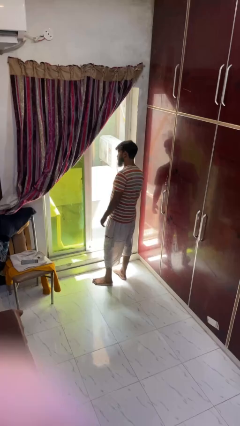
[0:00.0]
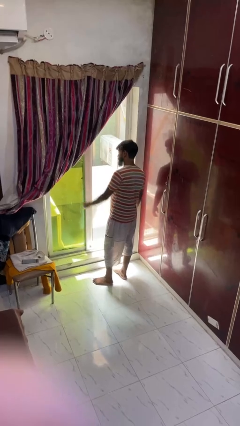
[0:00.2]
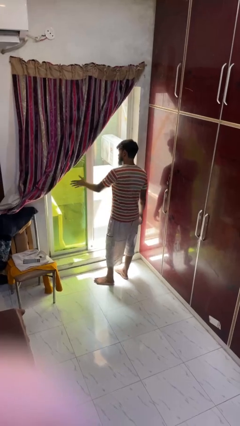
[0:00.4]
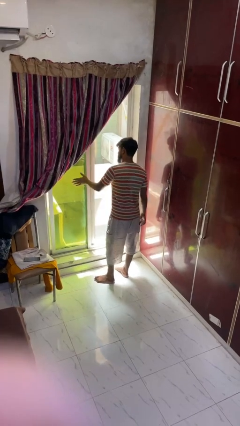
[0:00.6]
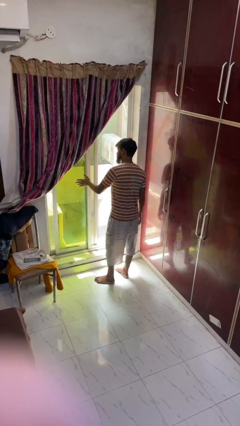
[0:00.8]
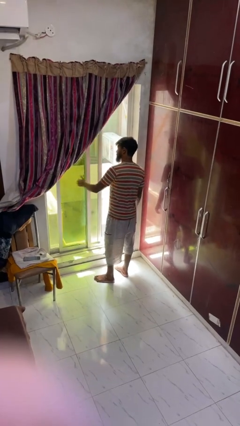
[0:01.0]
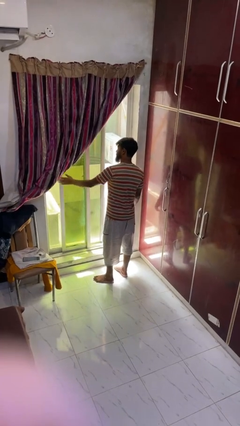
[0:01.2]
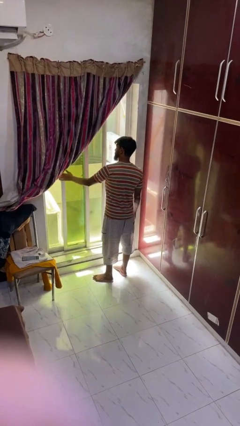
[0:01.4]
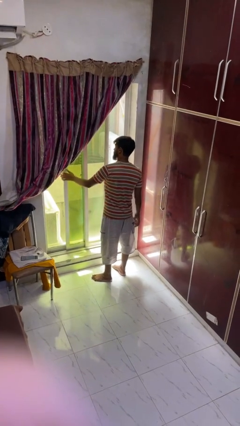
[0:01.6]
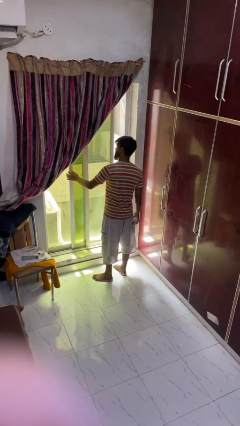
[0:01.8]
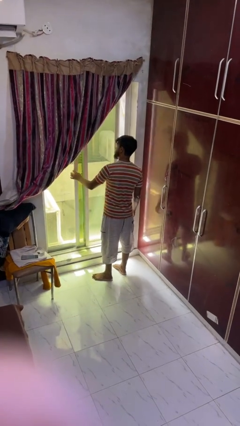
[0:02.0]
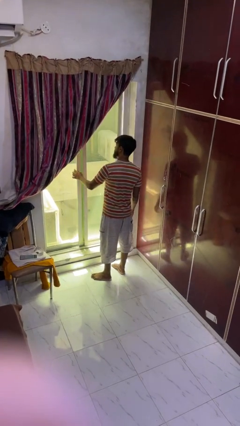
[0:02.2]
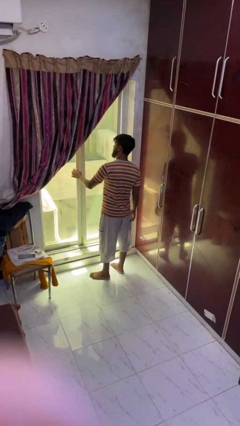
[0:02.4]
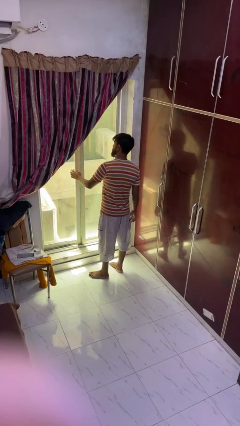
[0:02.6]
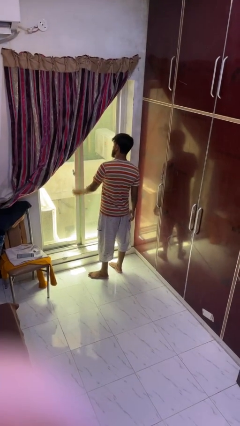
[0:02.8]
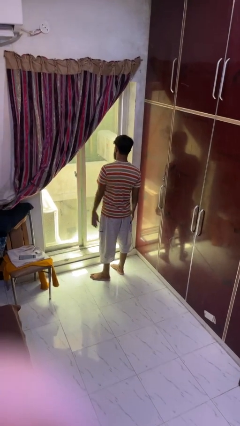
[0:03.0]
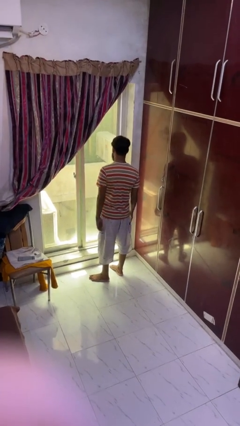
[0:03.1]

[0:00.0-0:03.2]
person closes home window

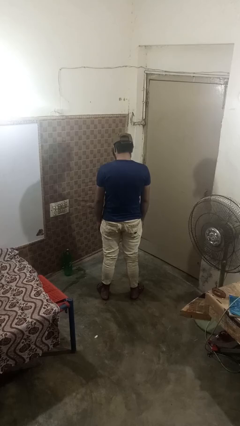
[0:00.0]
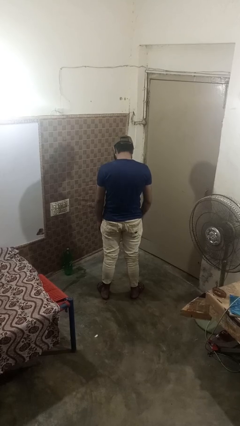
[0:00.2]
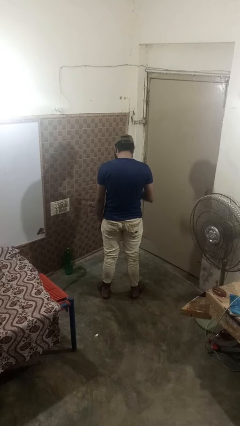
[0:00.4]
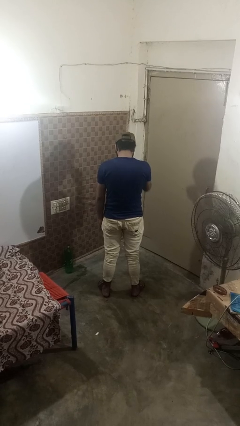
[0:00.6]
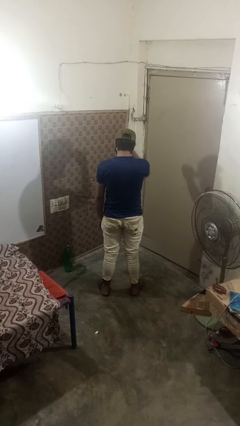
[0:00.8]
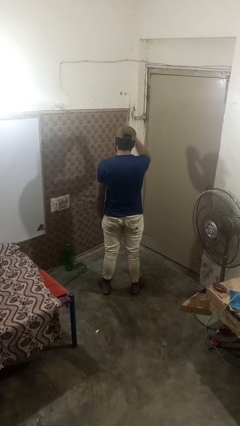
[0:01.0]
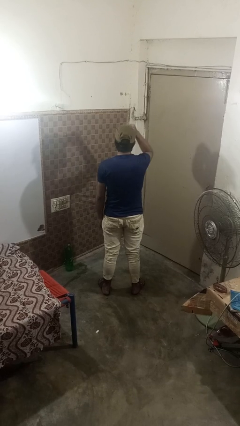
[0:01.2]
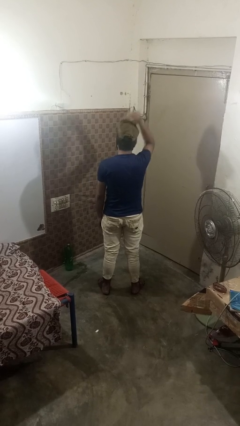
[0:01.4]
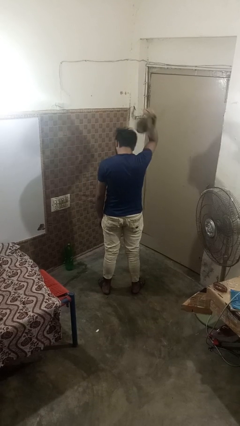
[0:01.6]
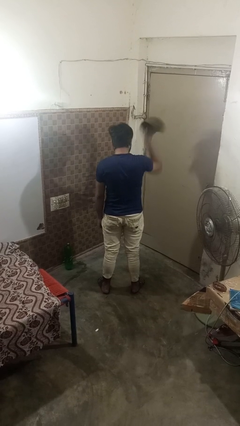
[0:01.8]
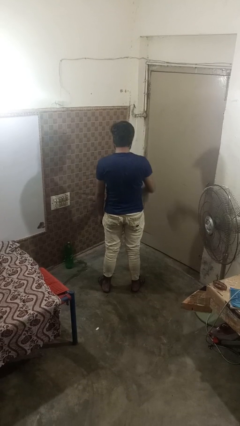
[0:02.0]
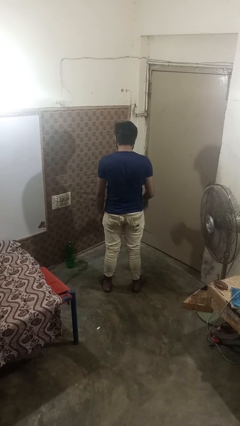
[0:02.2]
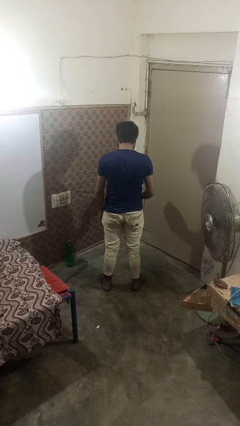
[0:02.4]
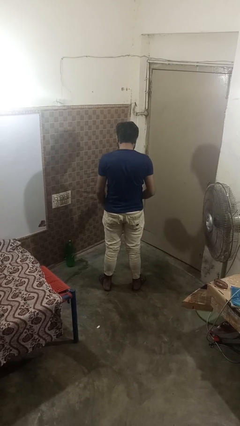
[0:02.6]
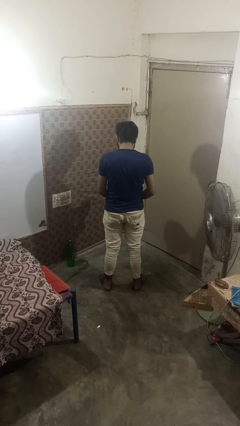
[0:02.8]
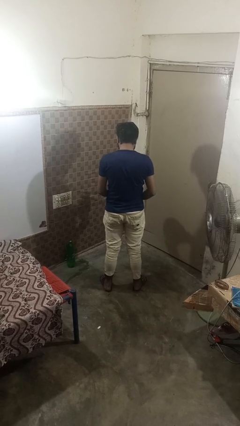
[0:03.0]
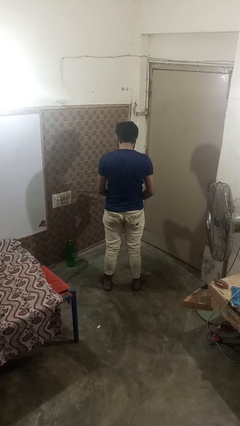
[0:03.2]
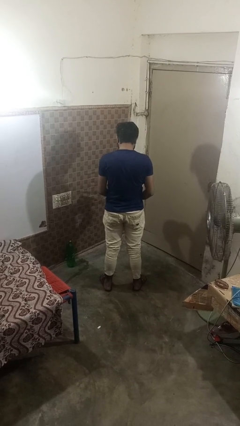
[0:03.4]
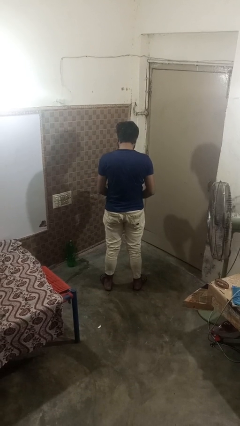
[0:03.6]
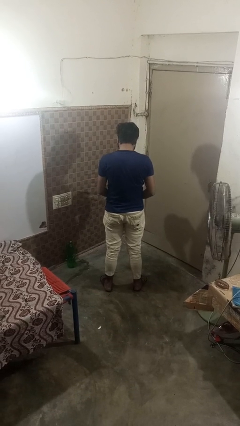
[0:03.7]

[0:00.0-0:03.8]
person takes off hat

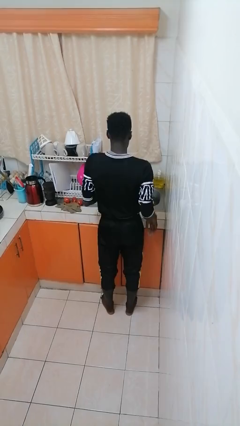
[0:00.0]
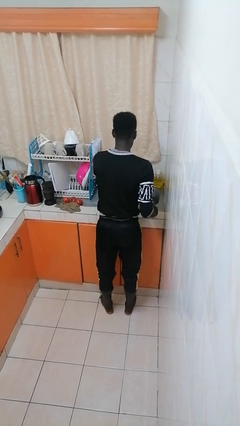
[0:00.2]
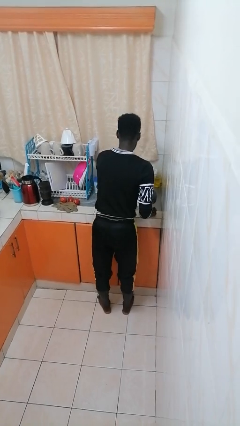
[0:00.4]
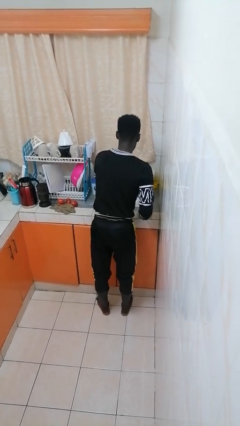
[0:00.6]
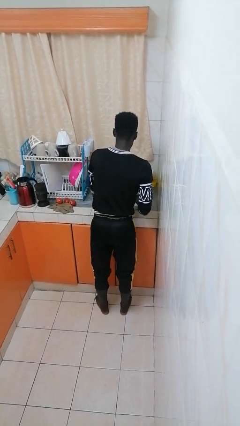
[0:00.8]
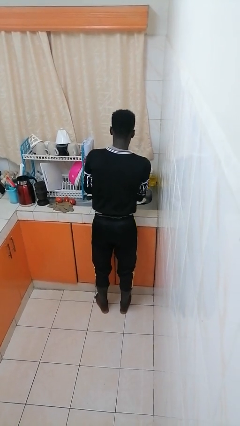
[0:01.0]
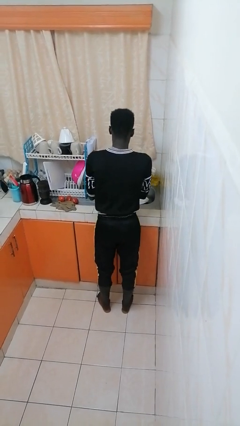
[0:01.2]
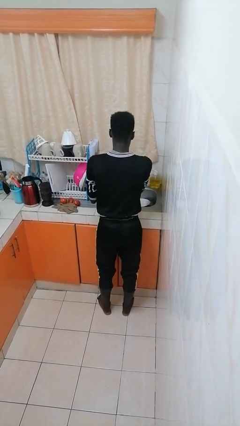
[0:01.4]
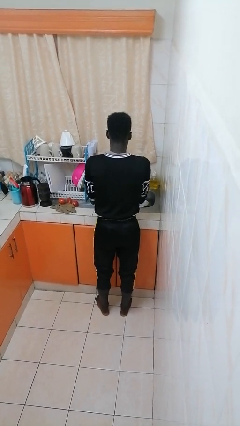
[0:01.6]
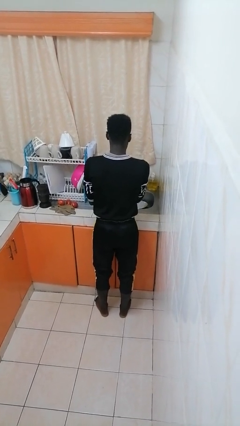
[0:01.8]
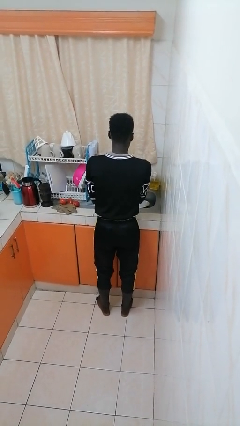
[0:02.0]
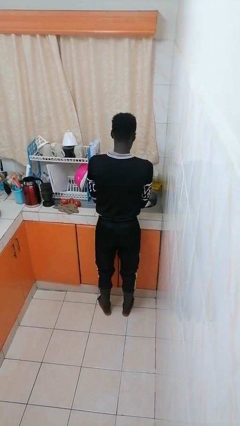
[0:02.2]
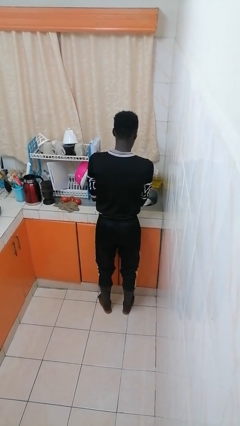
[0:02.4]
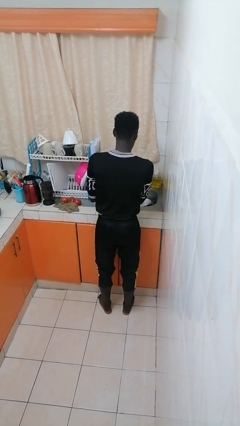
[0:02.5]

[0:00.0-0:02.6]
person washes dish

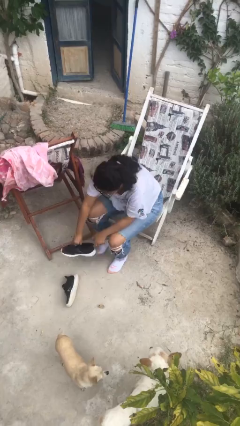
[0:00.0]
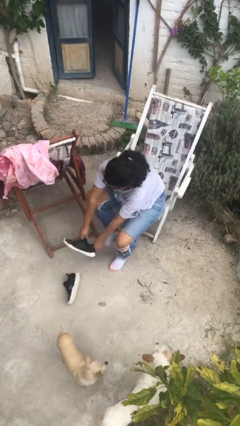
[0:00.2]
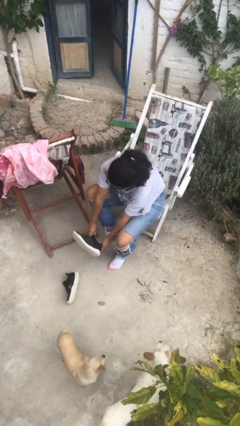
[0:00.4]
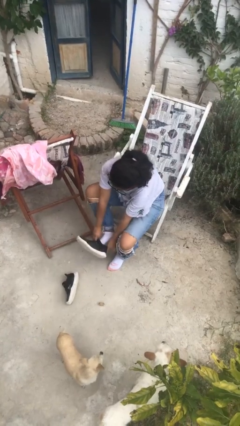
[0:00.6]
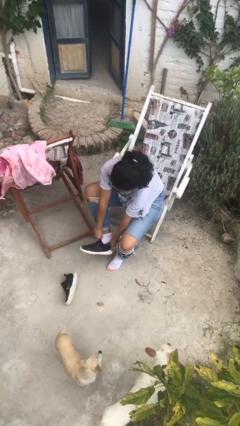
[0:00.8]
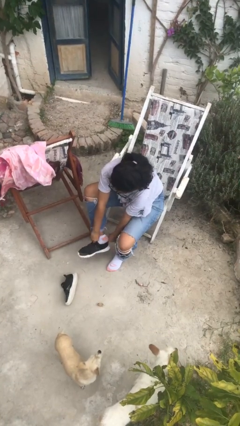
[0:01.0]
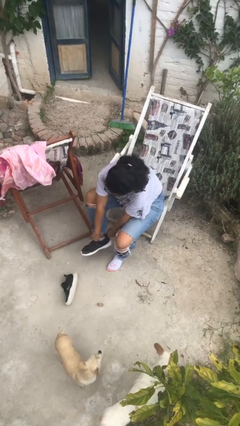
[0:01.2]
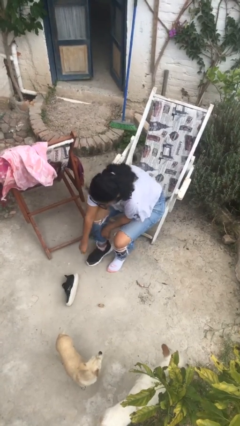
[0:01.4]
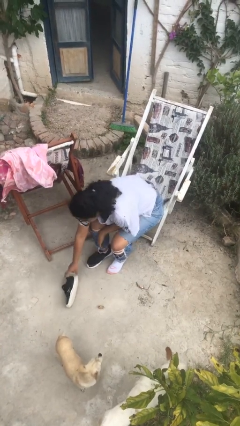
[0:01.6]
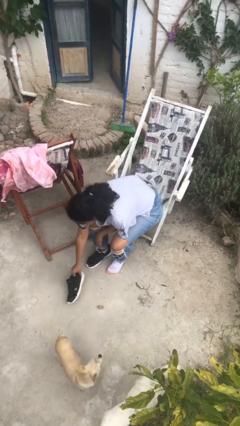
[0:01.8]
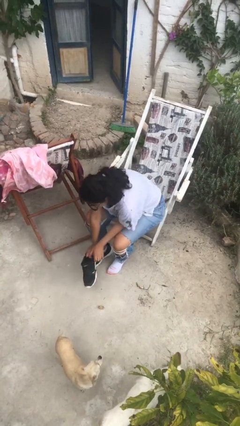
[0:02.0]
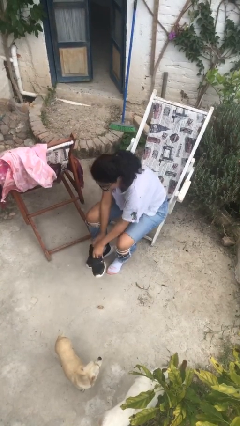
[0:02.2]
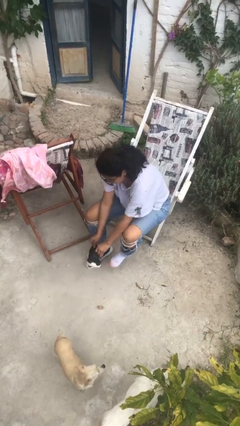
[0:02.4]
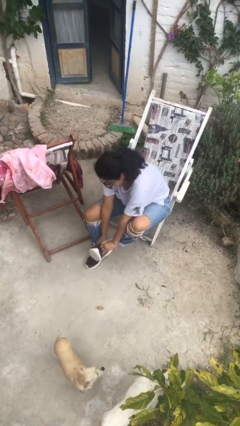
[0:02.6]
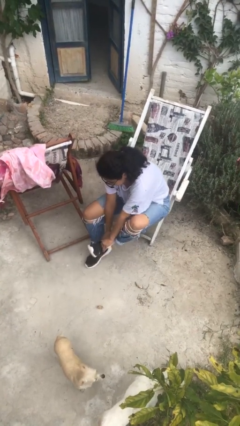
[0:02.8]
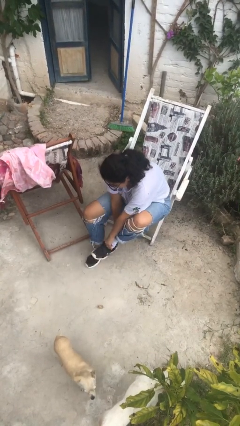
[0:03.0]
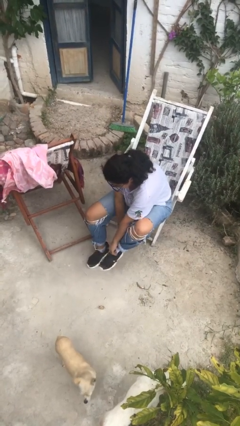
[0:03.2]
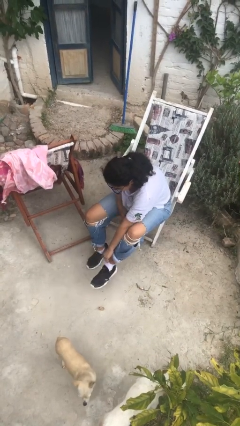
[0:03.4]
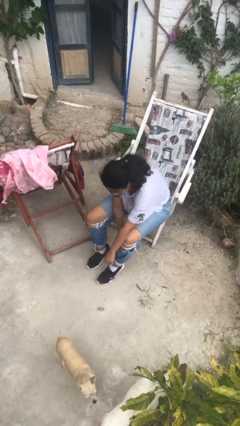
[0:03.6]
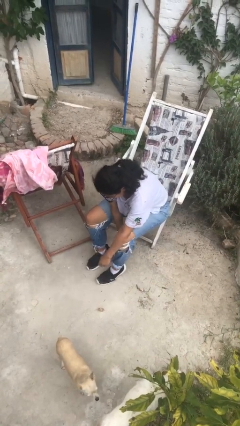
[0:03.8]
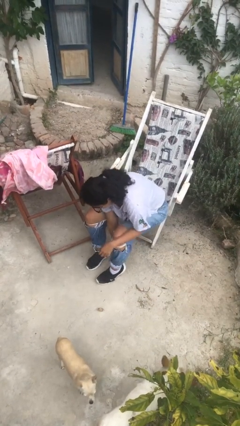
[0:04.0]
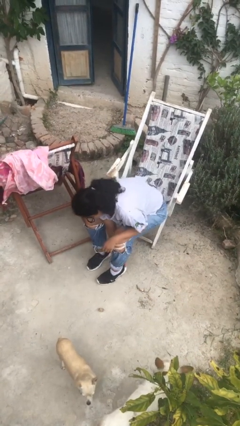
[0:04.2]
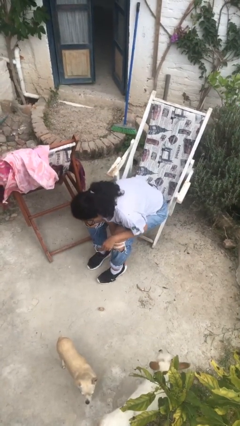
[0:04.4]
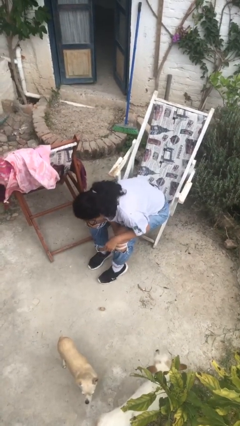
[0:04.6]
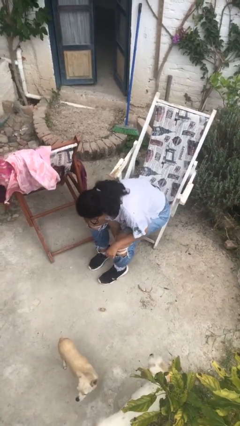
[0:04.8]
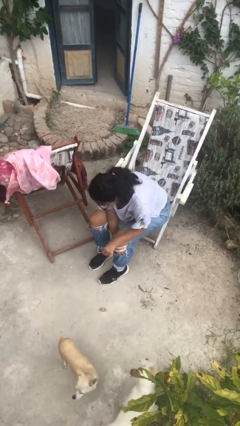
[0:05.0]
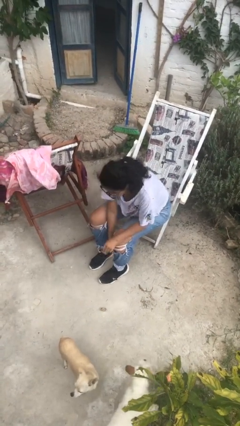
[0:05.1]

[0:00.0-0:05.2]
person puts on shoes

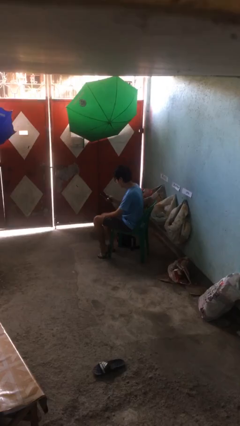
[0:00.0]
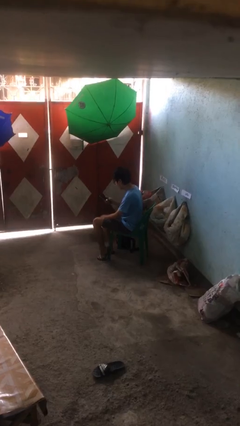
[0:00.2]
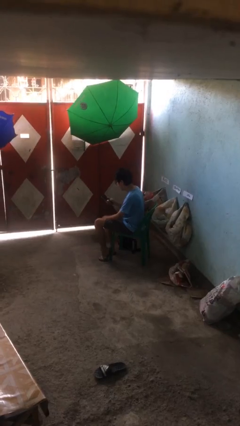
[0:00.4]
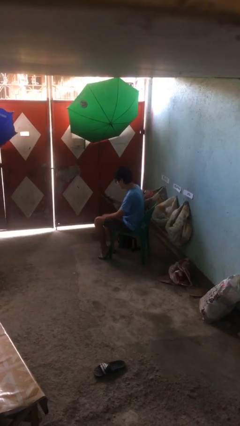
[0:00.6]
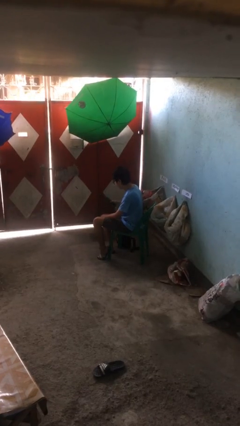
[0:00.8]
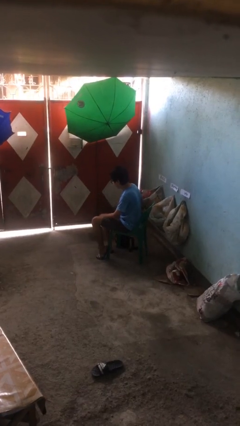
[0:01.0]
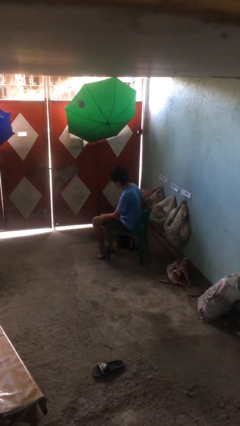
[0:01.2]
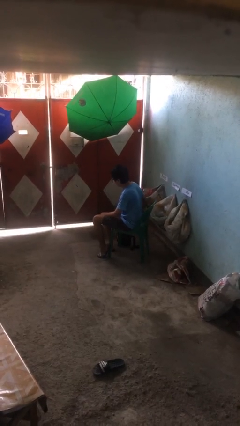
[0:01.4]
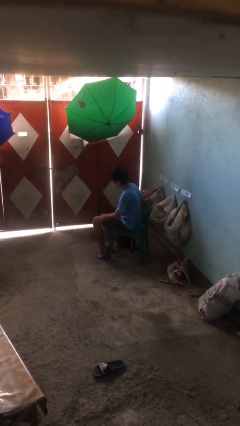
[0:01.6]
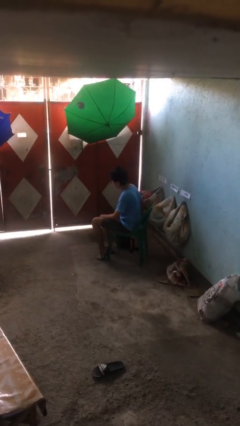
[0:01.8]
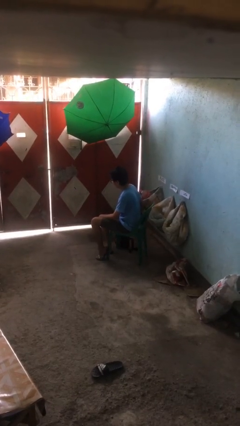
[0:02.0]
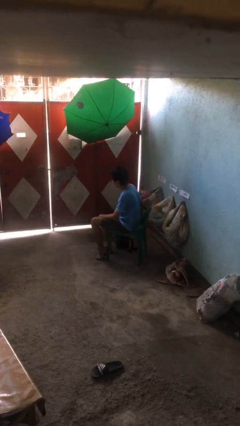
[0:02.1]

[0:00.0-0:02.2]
person puts phone into pocket

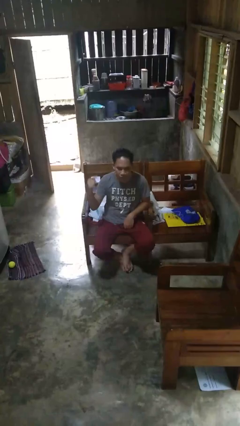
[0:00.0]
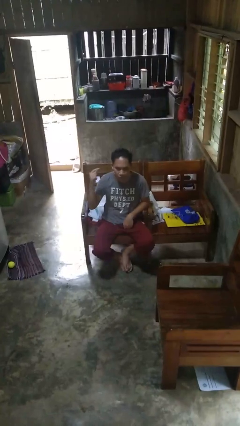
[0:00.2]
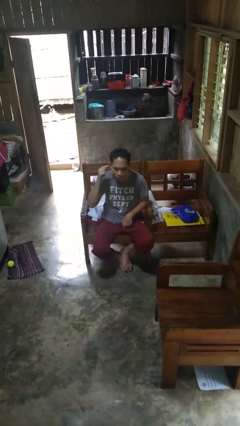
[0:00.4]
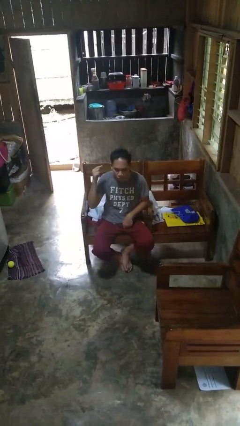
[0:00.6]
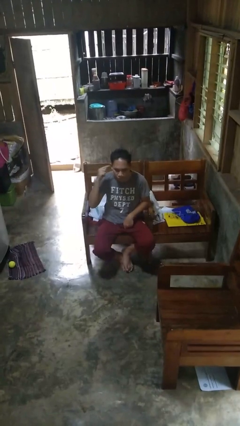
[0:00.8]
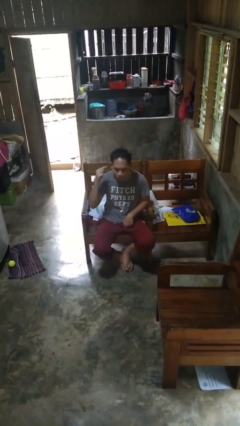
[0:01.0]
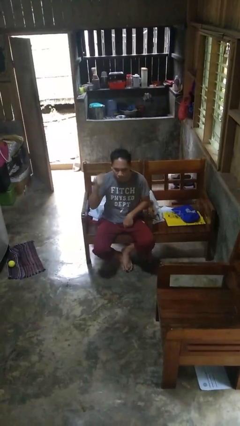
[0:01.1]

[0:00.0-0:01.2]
person gestures listen closely
